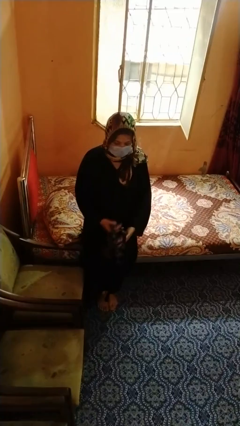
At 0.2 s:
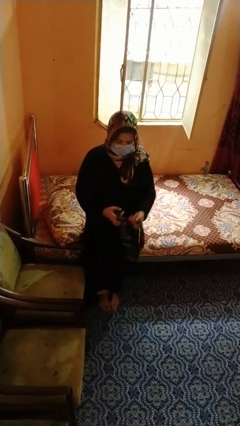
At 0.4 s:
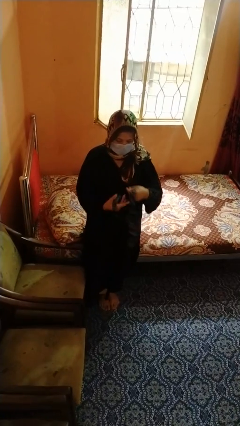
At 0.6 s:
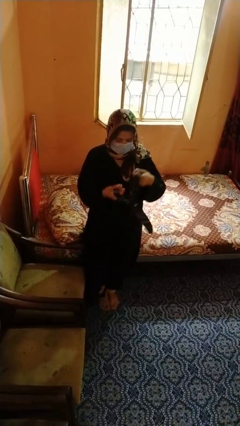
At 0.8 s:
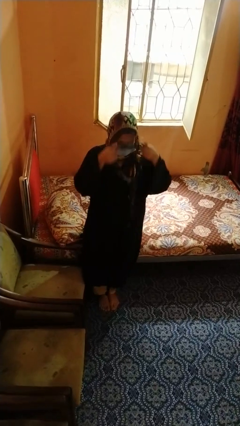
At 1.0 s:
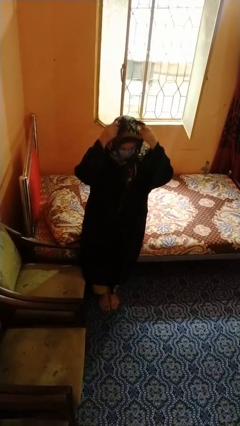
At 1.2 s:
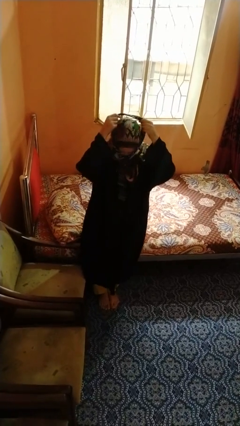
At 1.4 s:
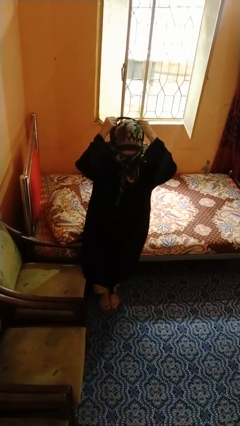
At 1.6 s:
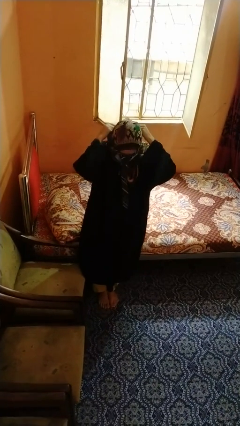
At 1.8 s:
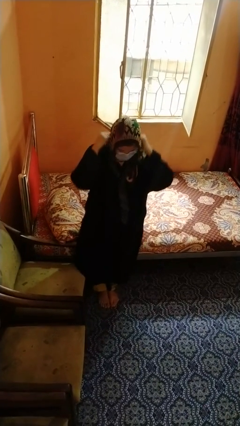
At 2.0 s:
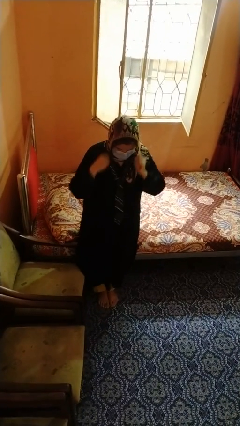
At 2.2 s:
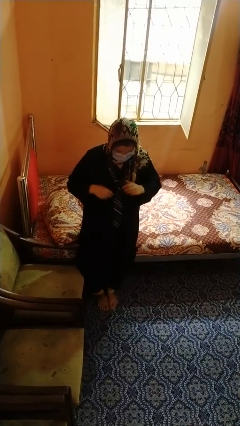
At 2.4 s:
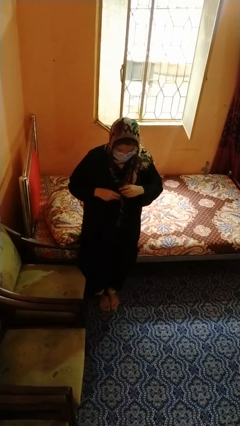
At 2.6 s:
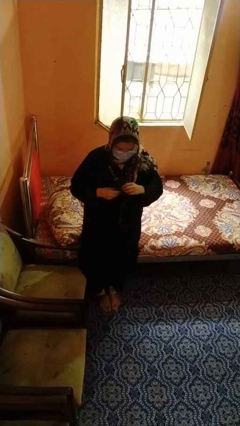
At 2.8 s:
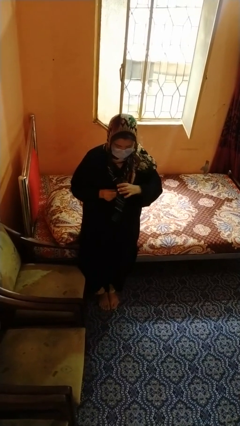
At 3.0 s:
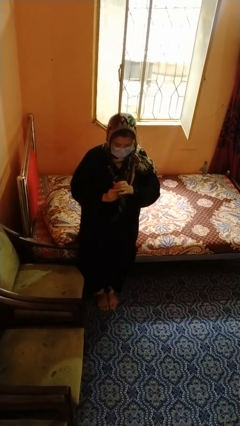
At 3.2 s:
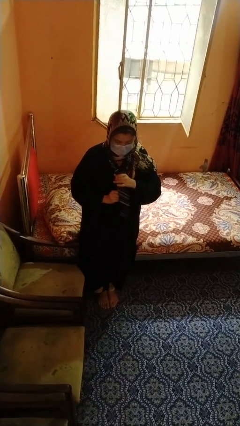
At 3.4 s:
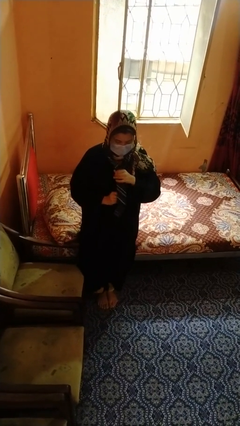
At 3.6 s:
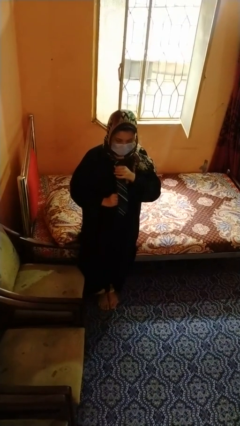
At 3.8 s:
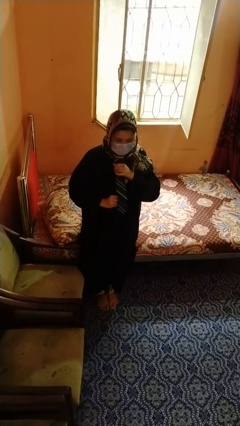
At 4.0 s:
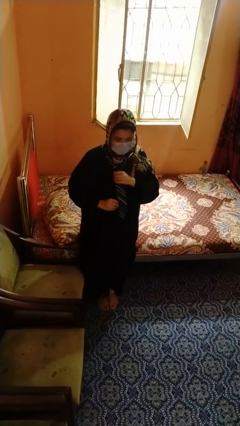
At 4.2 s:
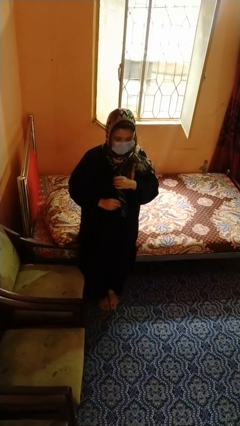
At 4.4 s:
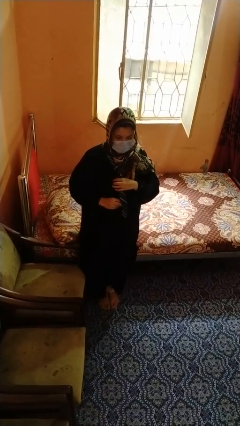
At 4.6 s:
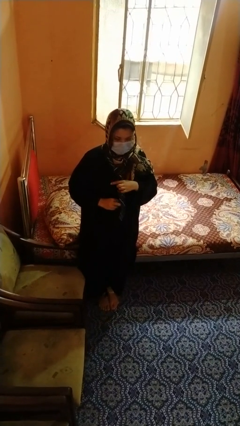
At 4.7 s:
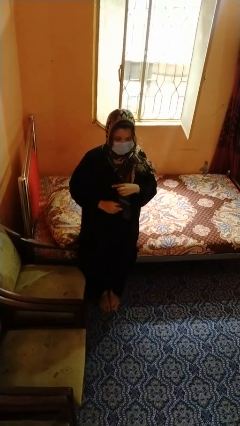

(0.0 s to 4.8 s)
person puts on necktie

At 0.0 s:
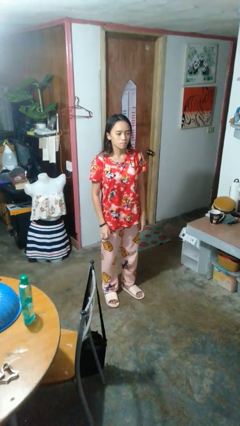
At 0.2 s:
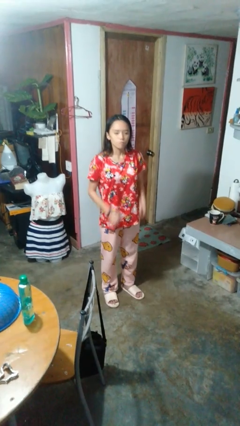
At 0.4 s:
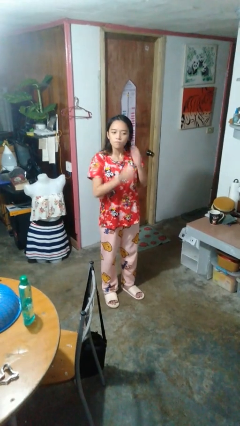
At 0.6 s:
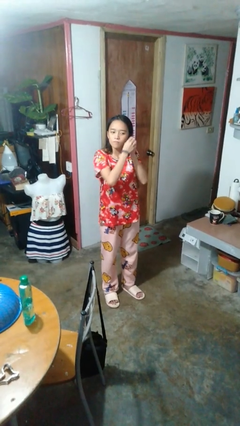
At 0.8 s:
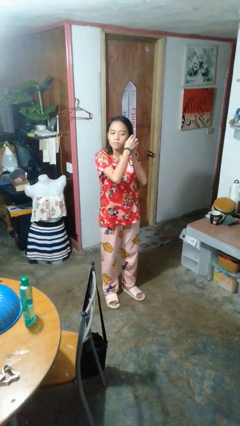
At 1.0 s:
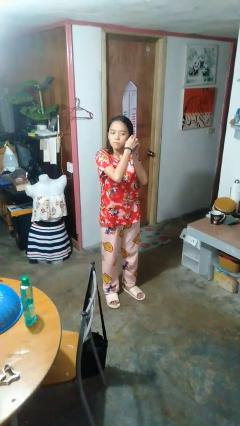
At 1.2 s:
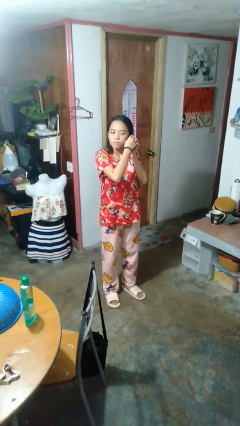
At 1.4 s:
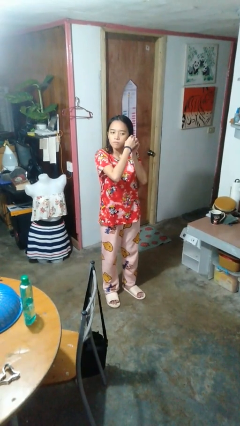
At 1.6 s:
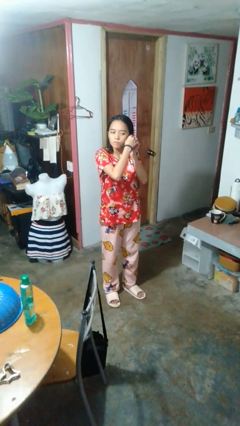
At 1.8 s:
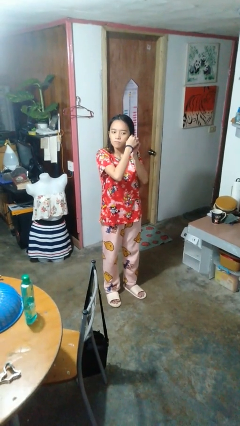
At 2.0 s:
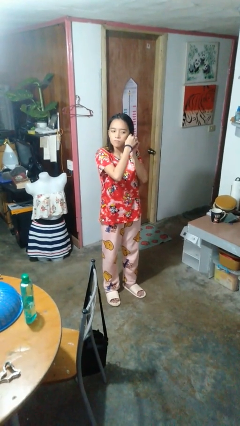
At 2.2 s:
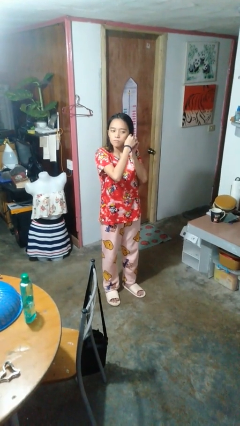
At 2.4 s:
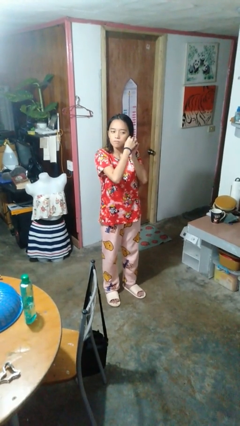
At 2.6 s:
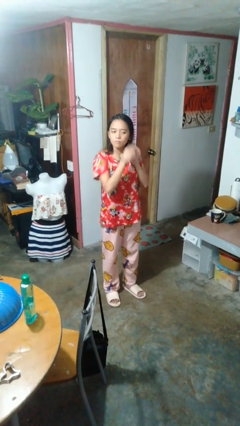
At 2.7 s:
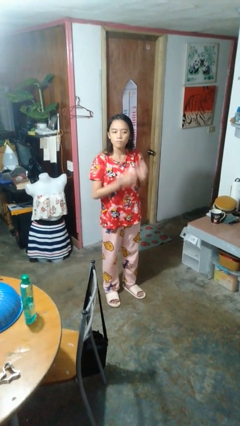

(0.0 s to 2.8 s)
person puts on earrings

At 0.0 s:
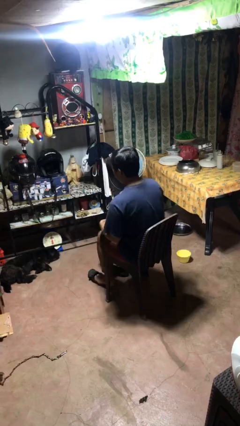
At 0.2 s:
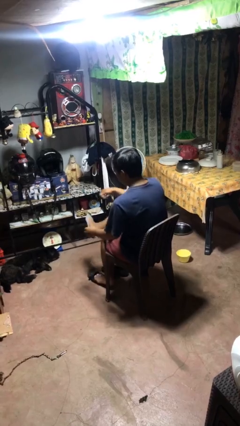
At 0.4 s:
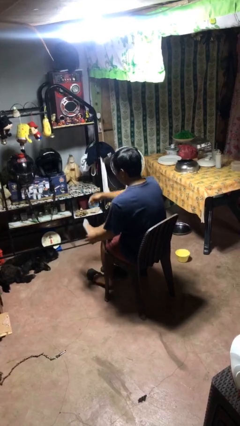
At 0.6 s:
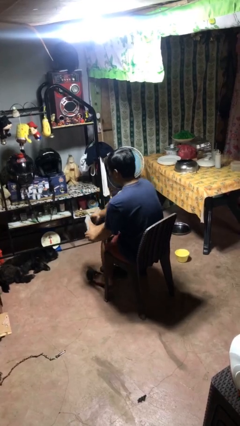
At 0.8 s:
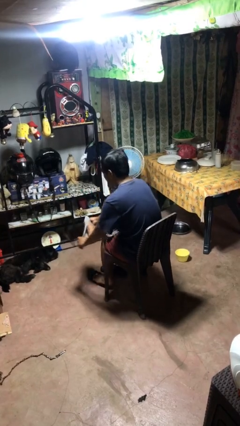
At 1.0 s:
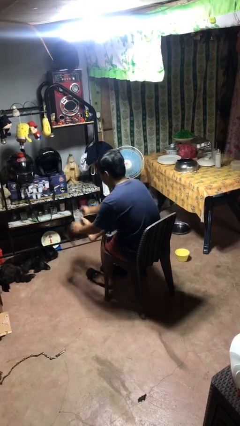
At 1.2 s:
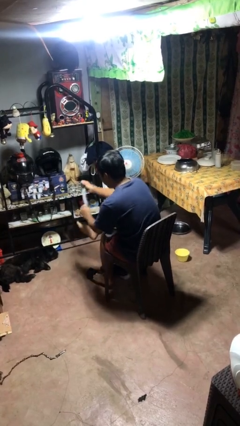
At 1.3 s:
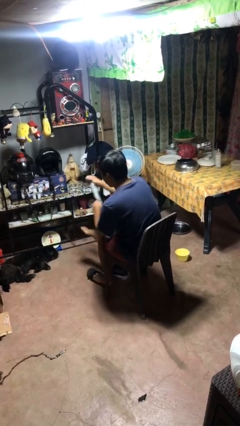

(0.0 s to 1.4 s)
person takes off socks

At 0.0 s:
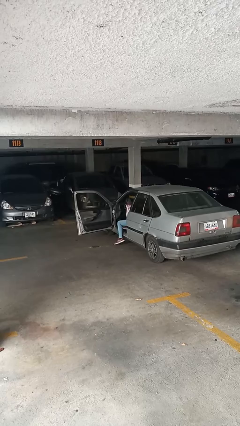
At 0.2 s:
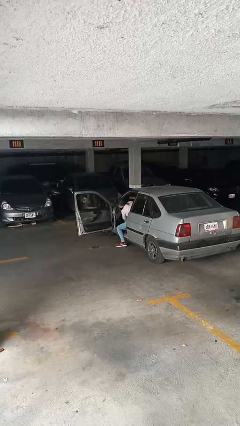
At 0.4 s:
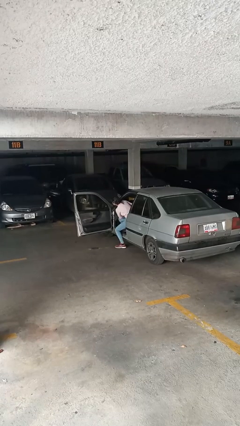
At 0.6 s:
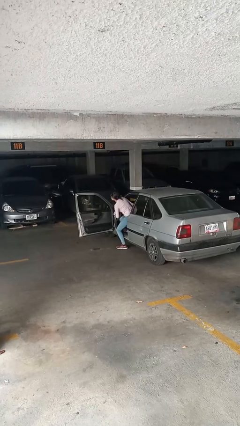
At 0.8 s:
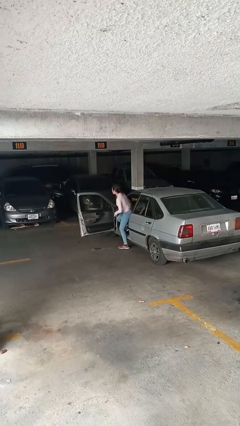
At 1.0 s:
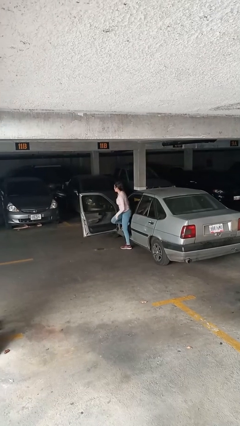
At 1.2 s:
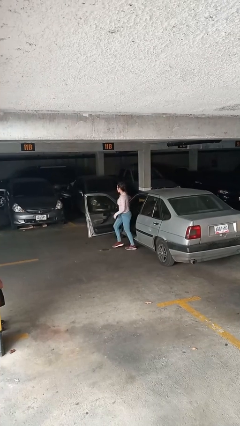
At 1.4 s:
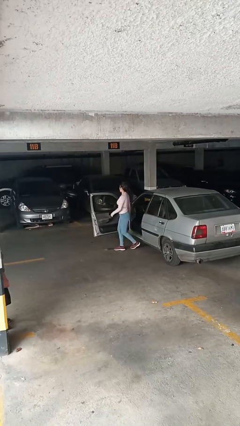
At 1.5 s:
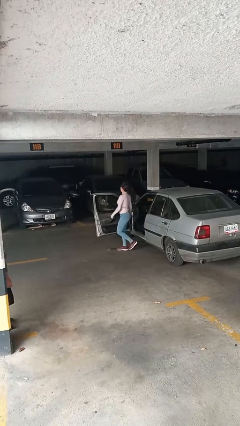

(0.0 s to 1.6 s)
person exits car

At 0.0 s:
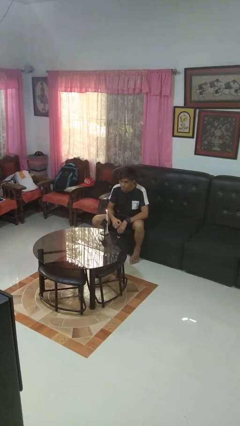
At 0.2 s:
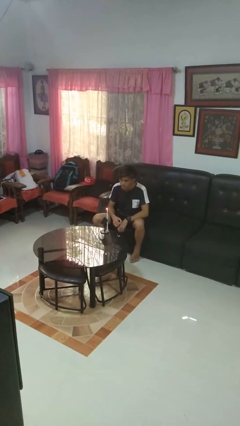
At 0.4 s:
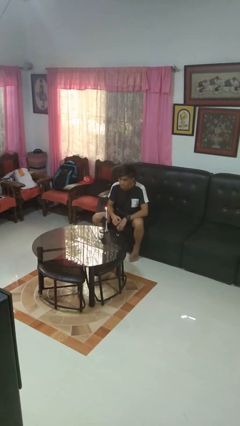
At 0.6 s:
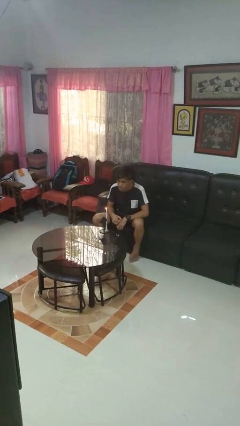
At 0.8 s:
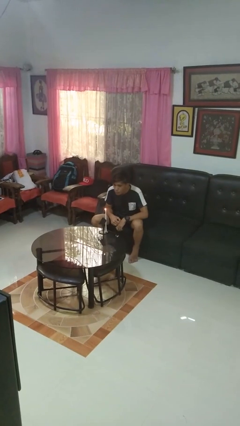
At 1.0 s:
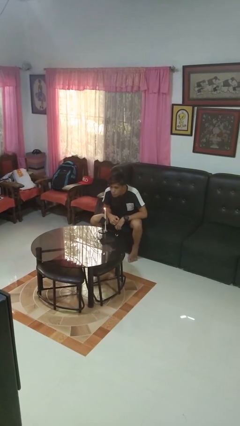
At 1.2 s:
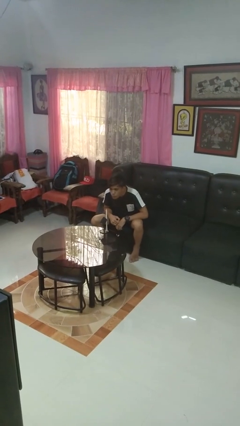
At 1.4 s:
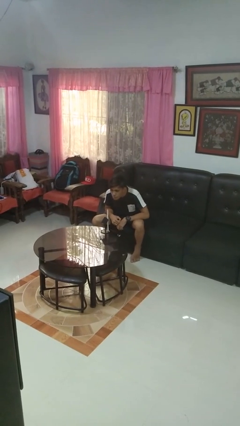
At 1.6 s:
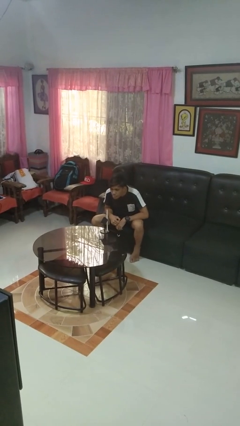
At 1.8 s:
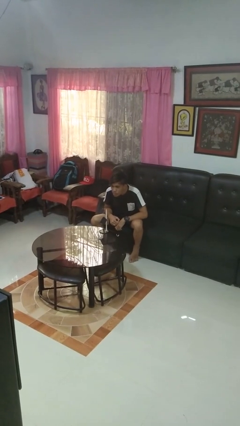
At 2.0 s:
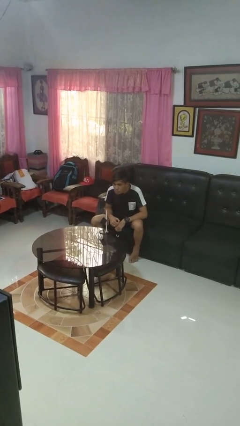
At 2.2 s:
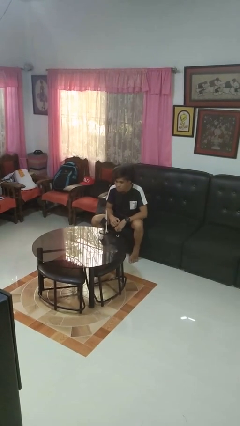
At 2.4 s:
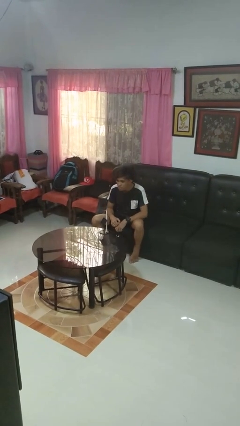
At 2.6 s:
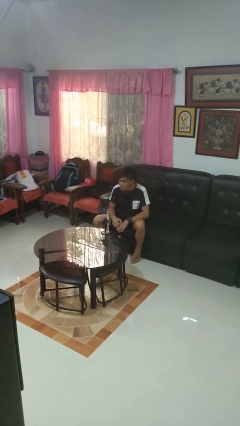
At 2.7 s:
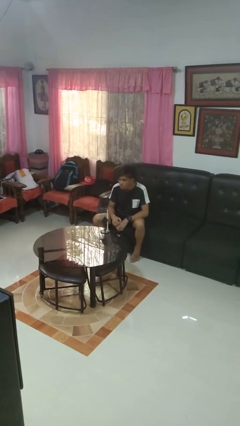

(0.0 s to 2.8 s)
person extinguishes candle

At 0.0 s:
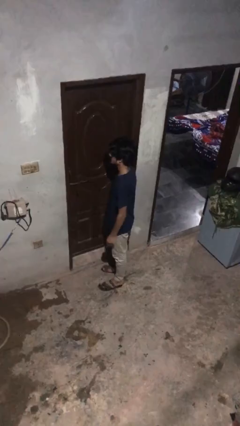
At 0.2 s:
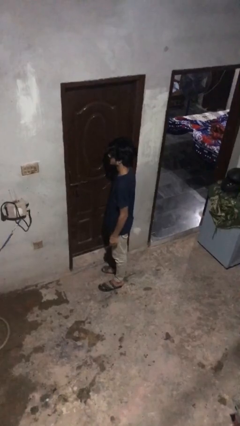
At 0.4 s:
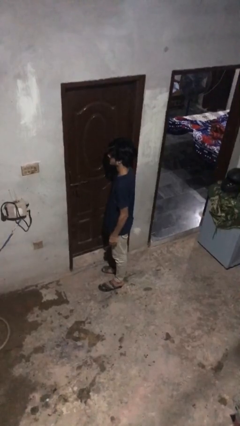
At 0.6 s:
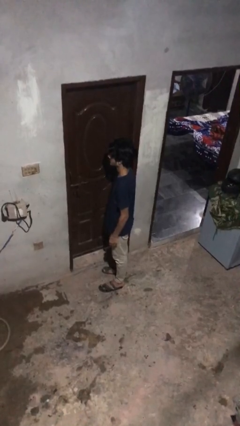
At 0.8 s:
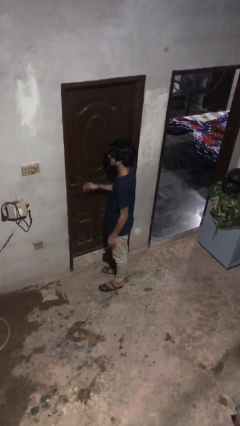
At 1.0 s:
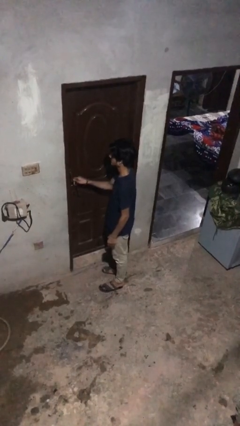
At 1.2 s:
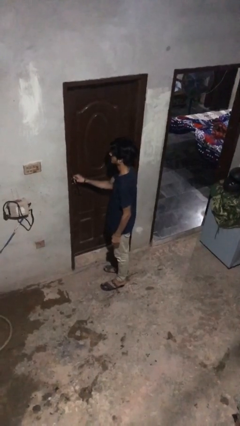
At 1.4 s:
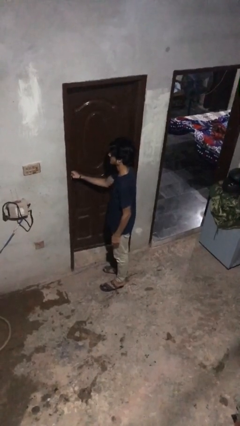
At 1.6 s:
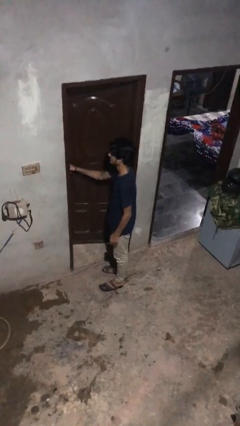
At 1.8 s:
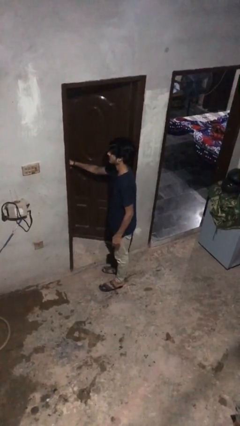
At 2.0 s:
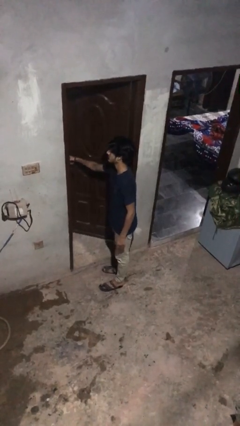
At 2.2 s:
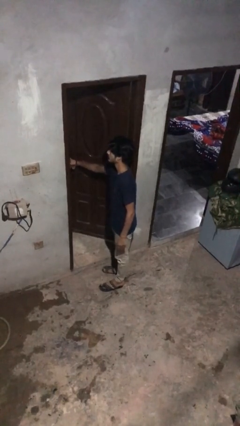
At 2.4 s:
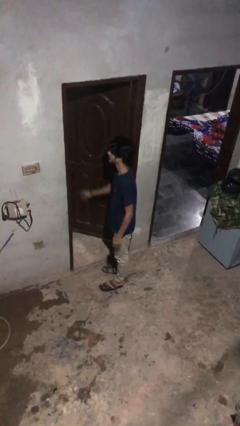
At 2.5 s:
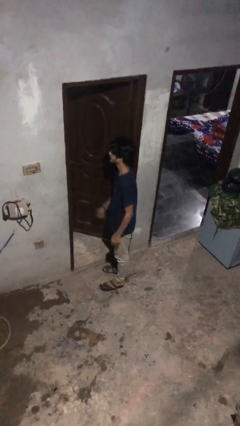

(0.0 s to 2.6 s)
person opens facility door

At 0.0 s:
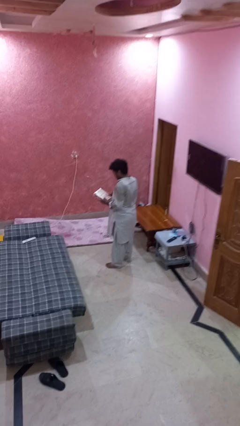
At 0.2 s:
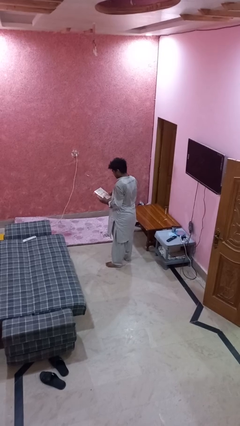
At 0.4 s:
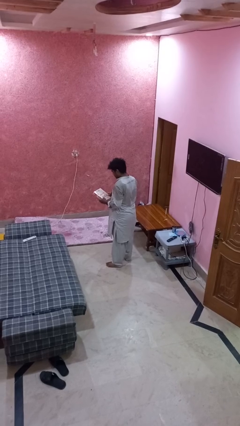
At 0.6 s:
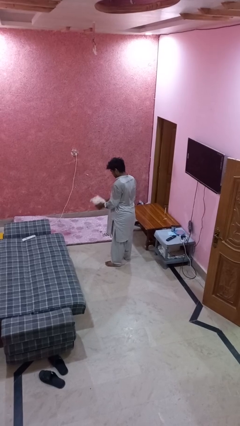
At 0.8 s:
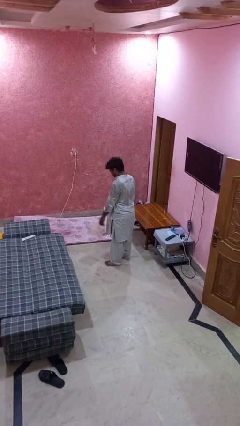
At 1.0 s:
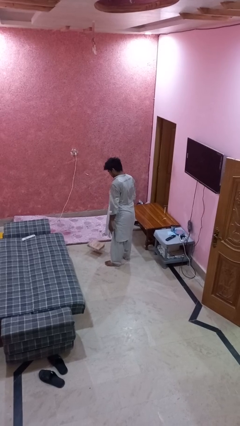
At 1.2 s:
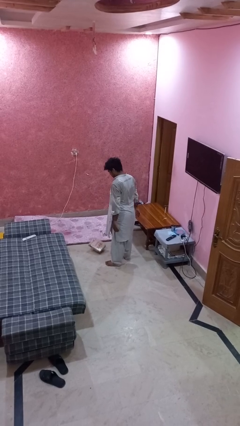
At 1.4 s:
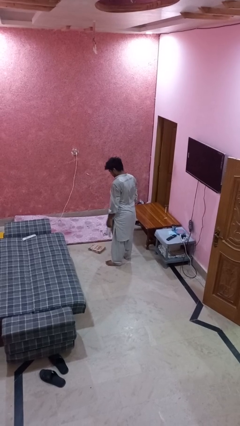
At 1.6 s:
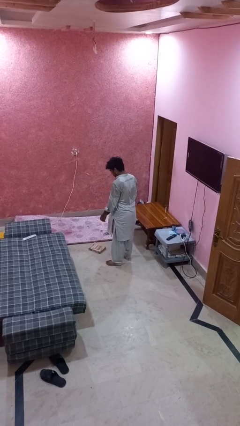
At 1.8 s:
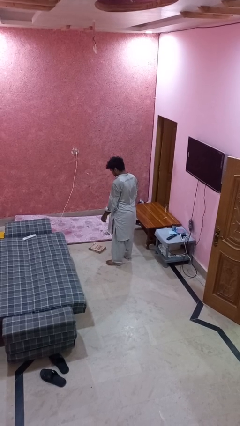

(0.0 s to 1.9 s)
person throws object to ground
